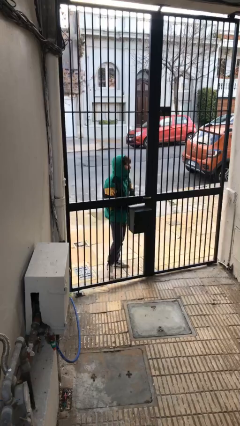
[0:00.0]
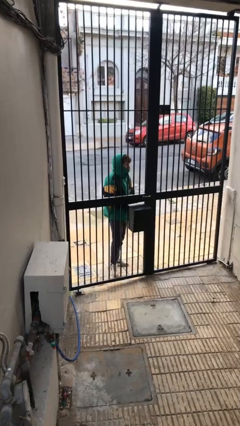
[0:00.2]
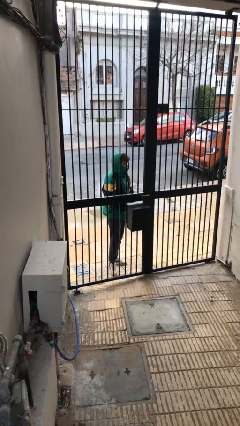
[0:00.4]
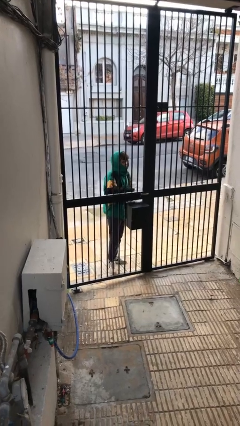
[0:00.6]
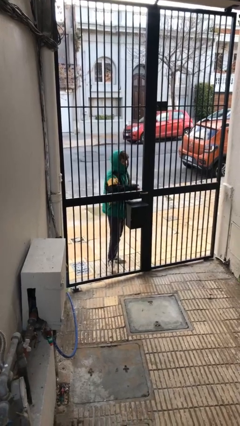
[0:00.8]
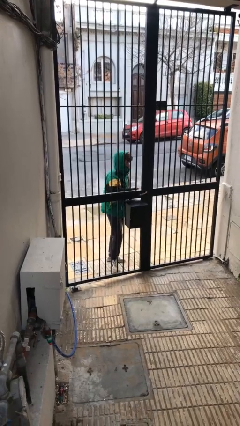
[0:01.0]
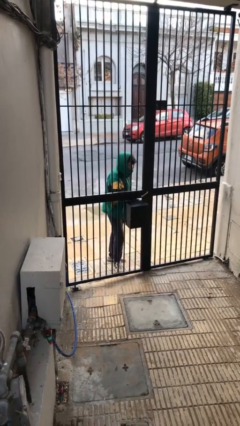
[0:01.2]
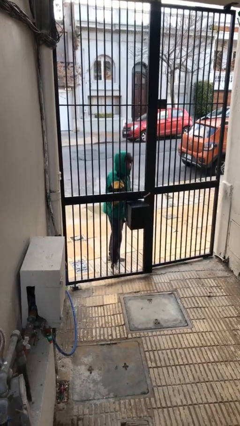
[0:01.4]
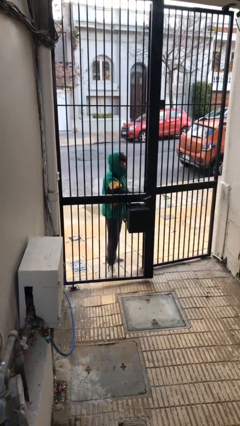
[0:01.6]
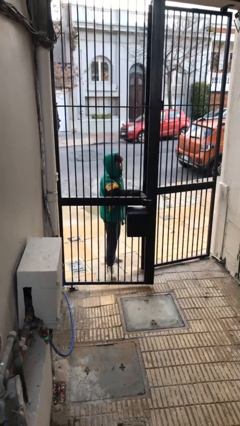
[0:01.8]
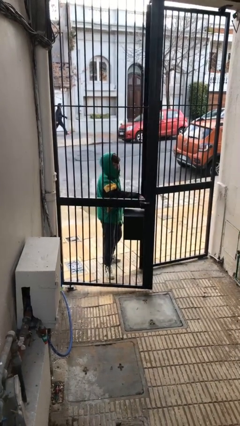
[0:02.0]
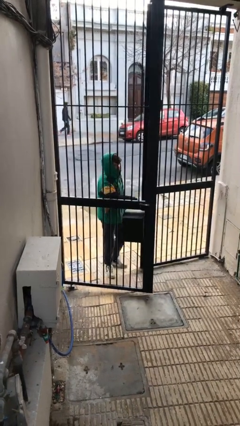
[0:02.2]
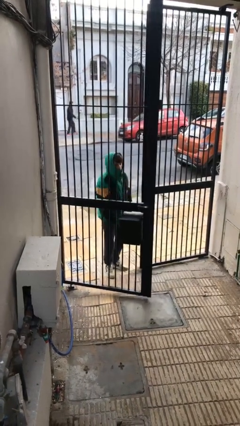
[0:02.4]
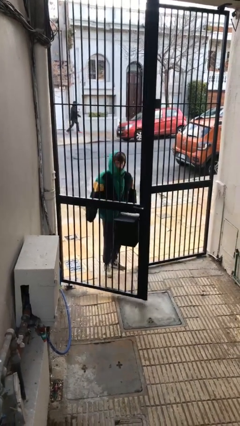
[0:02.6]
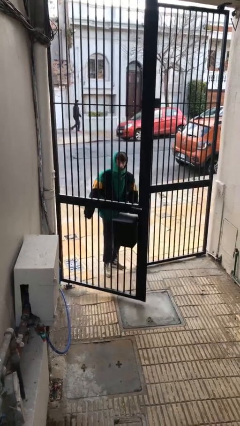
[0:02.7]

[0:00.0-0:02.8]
person opens gate

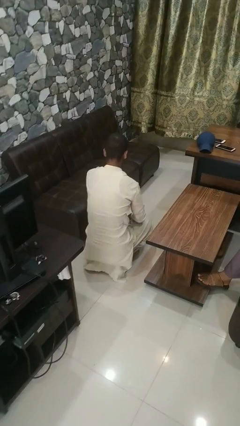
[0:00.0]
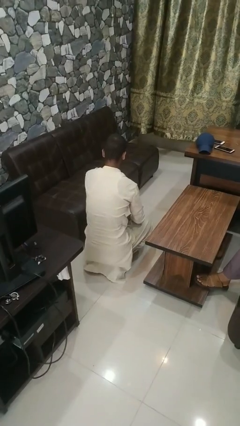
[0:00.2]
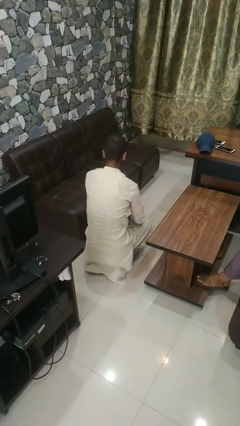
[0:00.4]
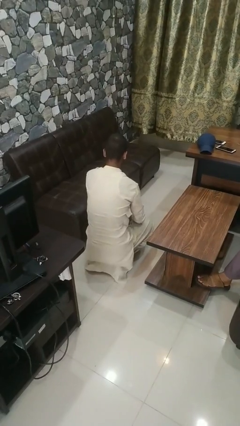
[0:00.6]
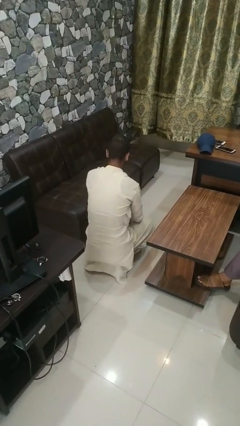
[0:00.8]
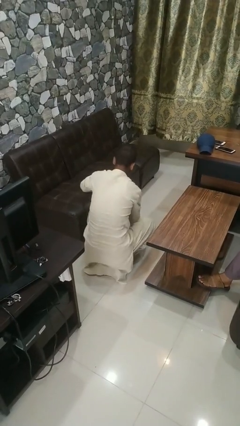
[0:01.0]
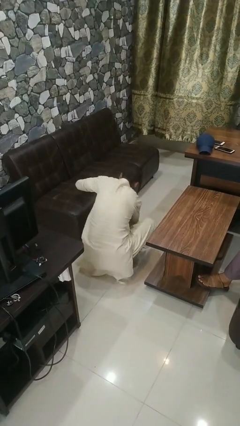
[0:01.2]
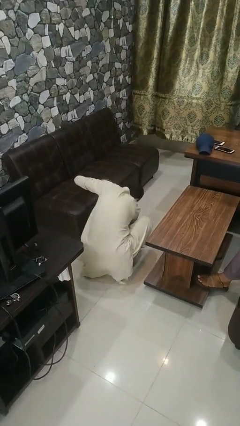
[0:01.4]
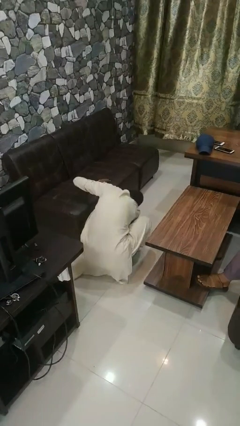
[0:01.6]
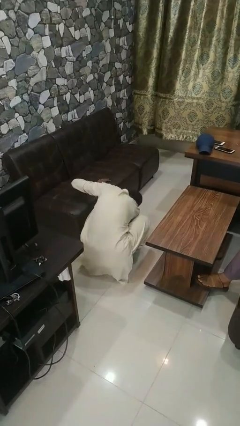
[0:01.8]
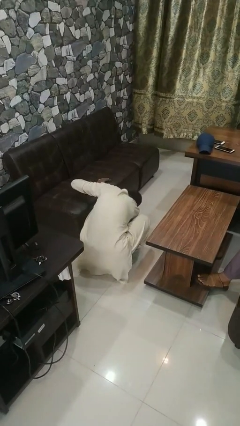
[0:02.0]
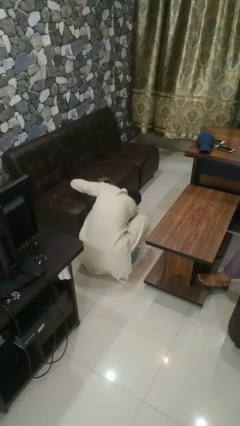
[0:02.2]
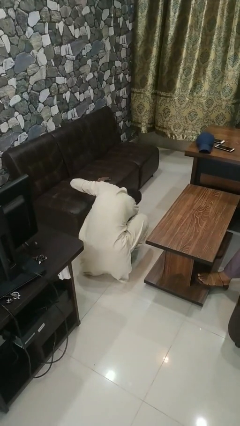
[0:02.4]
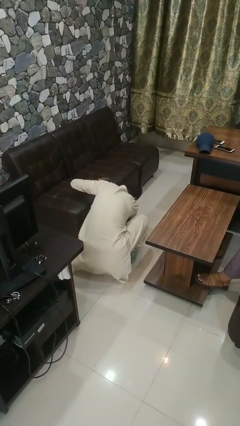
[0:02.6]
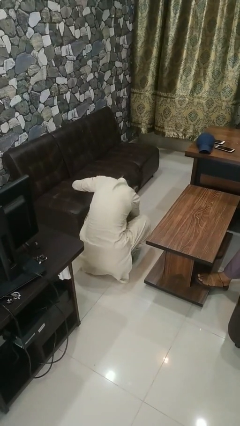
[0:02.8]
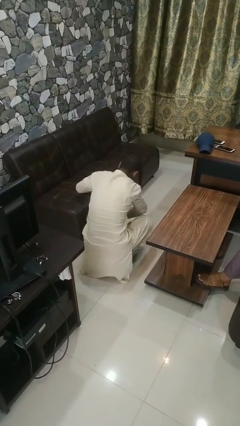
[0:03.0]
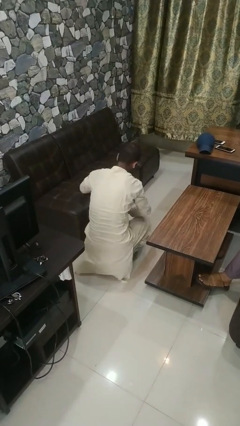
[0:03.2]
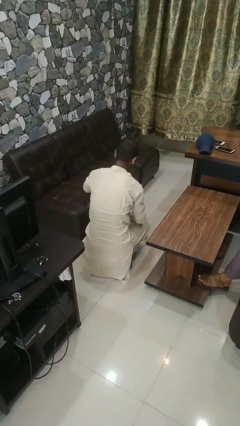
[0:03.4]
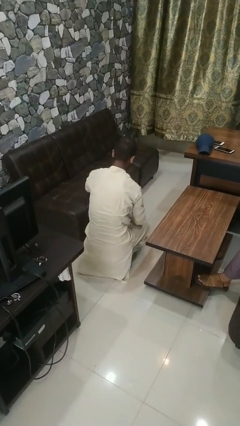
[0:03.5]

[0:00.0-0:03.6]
person searches under couch

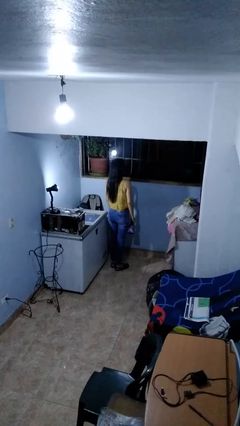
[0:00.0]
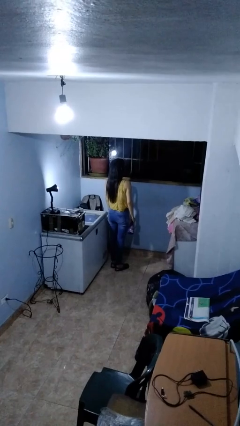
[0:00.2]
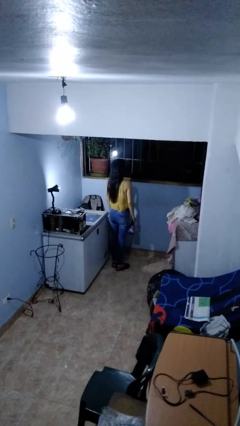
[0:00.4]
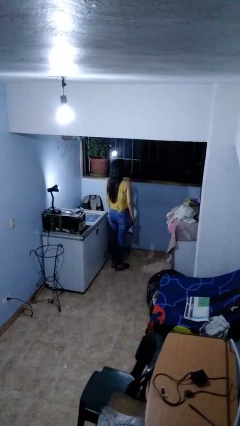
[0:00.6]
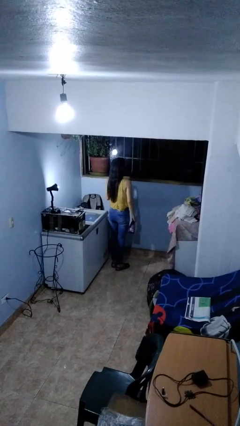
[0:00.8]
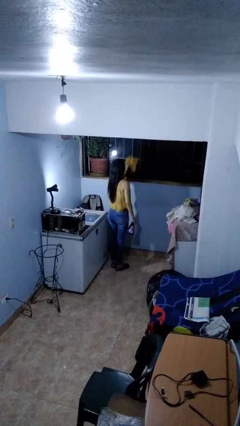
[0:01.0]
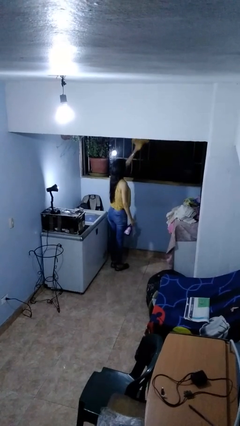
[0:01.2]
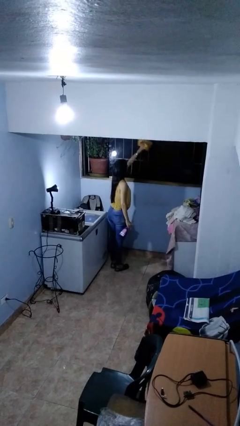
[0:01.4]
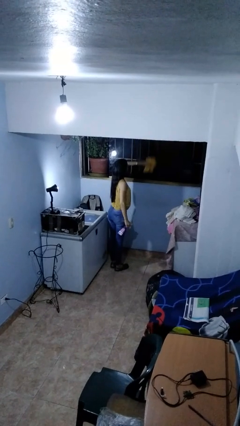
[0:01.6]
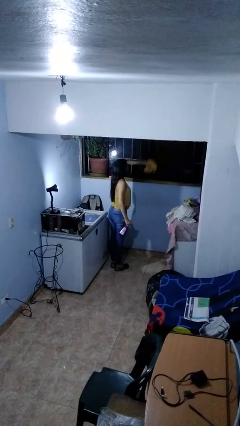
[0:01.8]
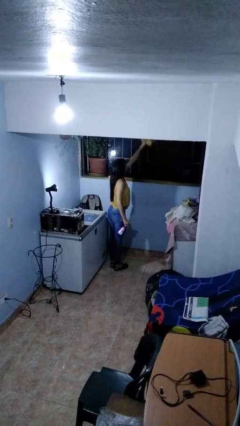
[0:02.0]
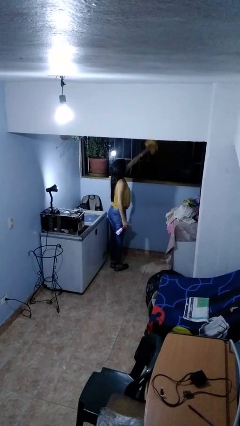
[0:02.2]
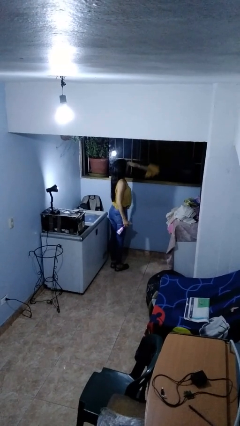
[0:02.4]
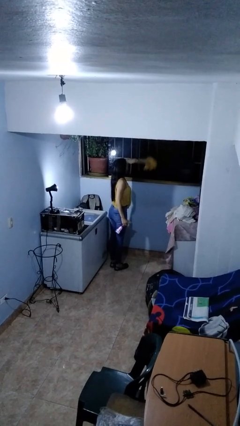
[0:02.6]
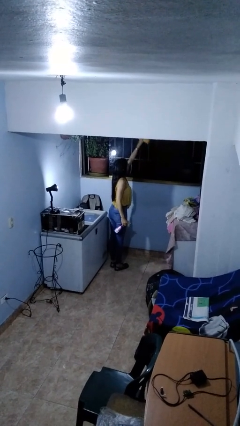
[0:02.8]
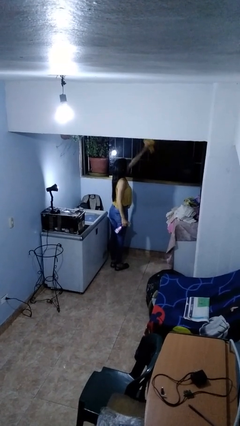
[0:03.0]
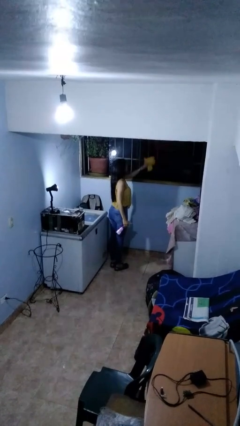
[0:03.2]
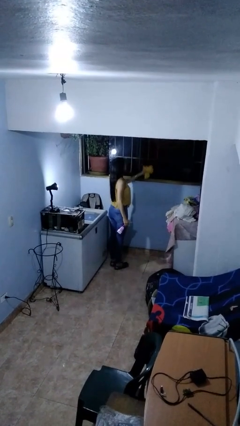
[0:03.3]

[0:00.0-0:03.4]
person washes window

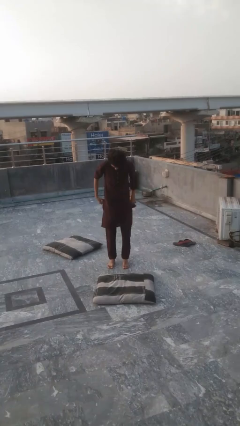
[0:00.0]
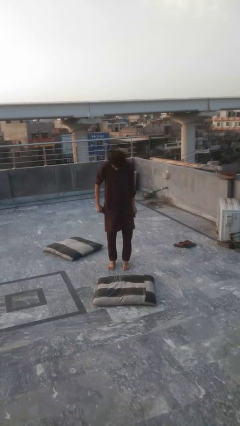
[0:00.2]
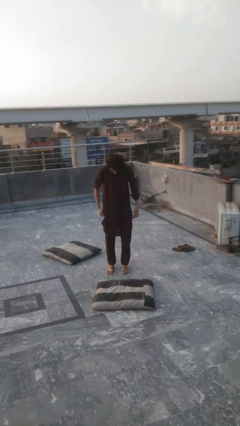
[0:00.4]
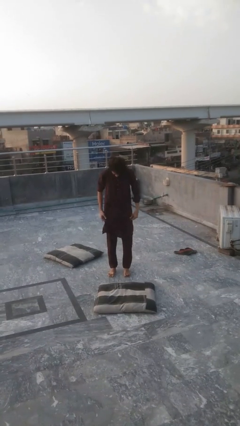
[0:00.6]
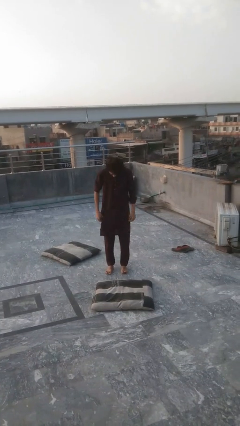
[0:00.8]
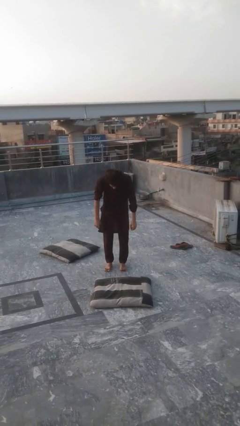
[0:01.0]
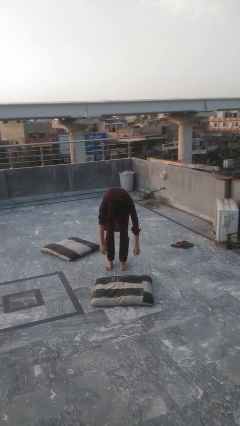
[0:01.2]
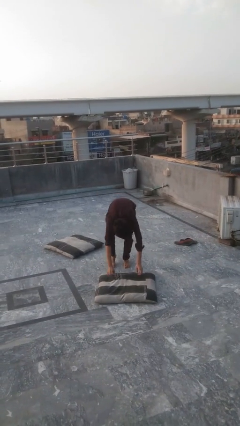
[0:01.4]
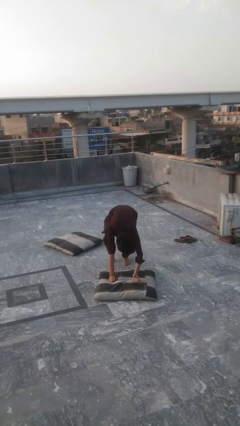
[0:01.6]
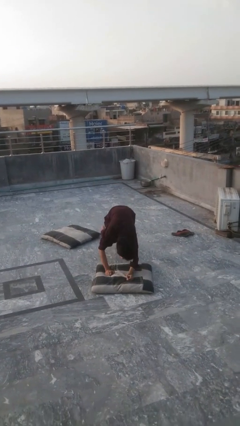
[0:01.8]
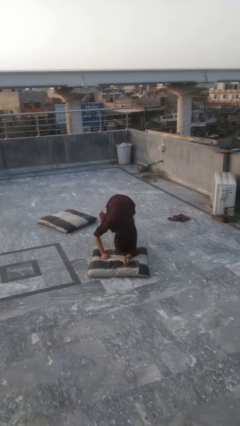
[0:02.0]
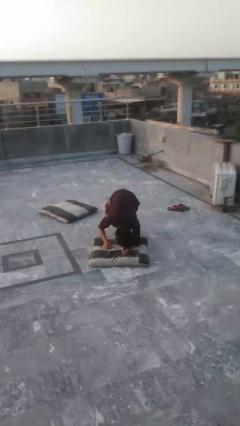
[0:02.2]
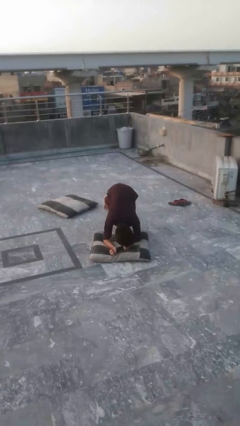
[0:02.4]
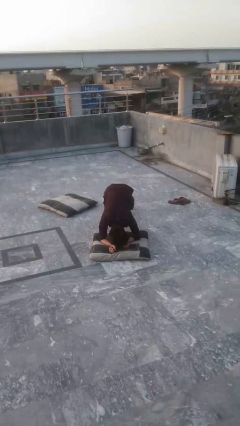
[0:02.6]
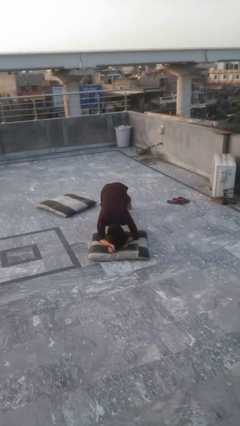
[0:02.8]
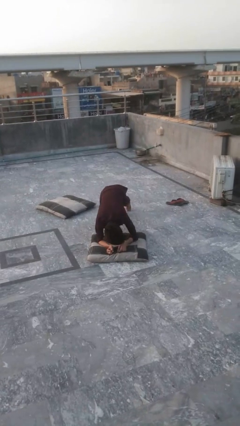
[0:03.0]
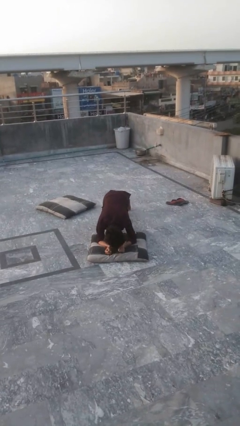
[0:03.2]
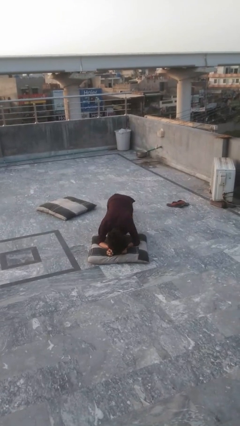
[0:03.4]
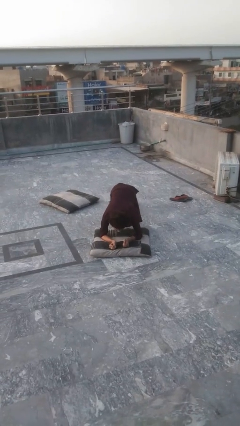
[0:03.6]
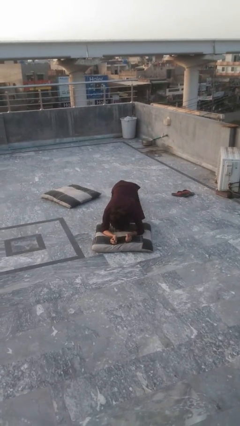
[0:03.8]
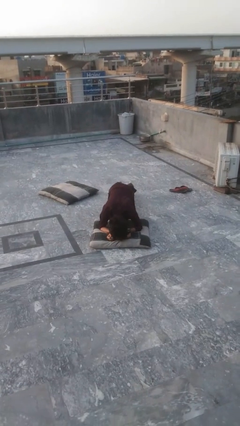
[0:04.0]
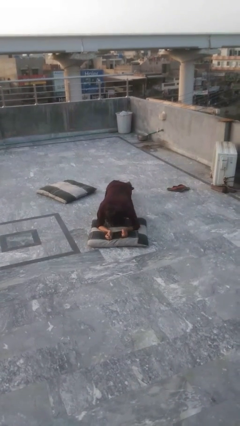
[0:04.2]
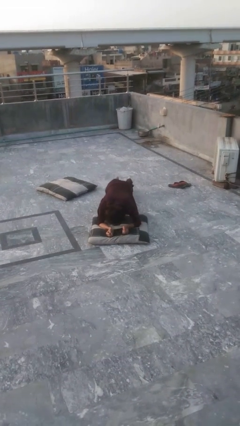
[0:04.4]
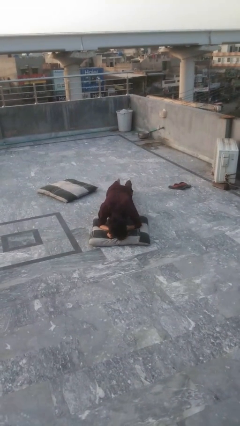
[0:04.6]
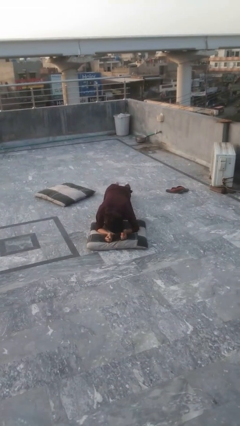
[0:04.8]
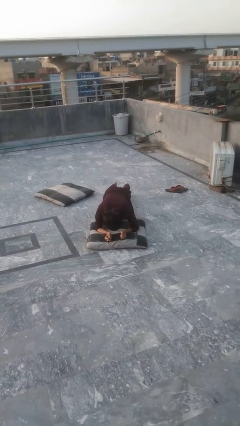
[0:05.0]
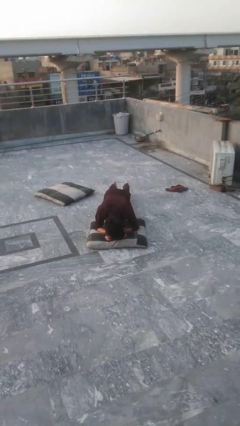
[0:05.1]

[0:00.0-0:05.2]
person exercises with plank

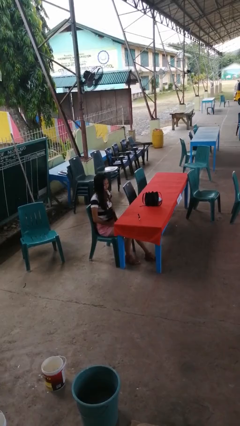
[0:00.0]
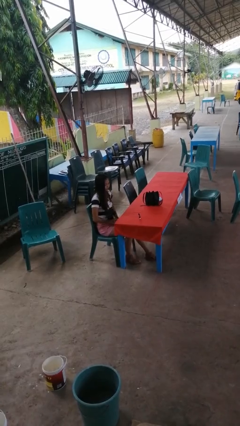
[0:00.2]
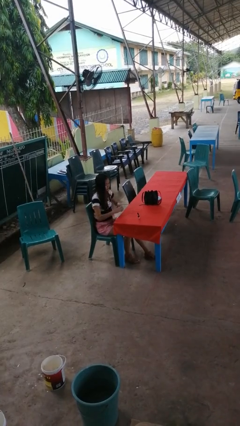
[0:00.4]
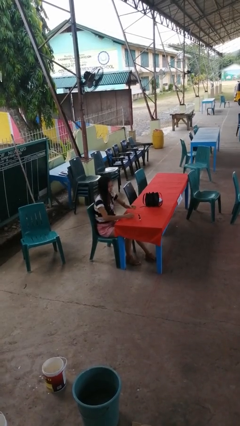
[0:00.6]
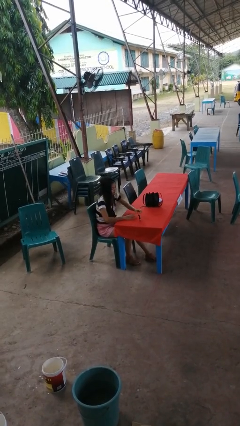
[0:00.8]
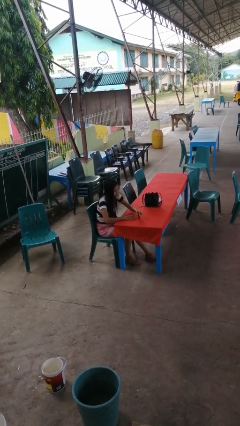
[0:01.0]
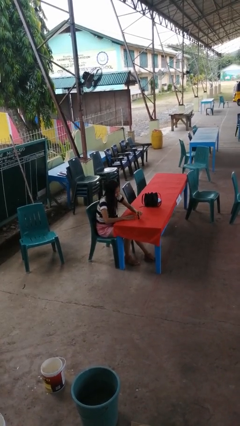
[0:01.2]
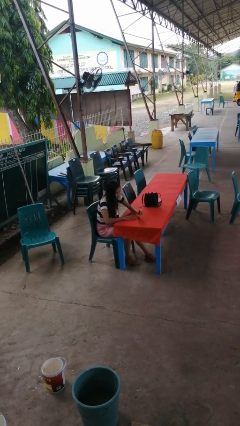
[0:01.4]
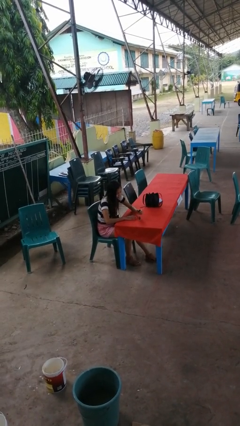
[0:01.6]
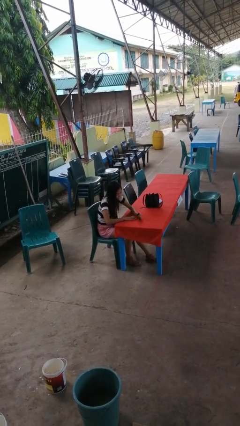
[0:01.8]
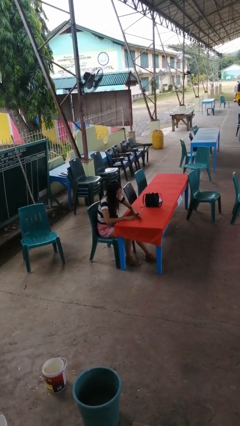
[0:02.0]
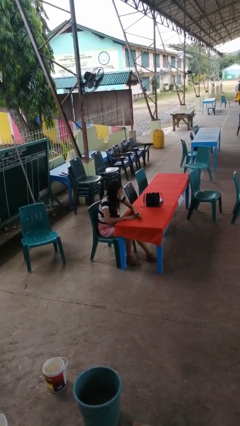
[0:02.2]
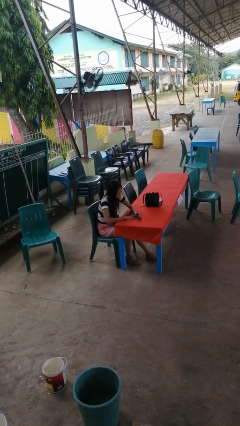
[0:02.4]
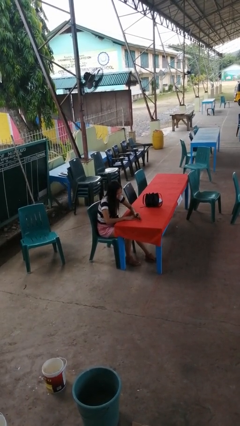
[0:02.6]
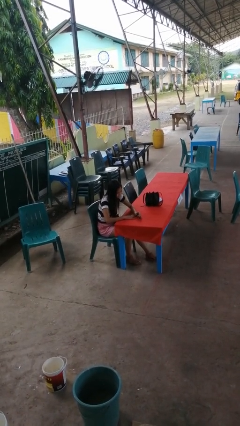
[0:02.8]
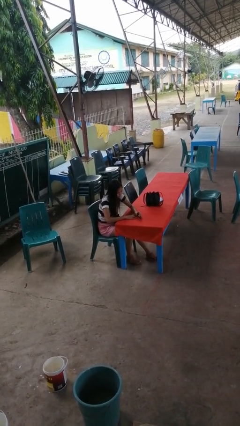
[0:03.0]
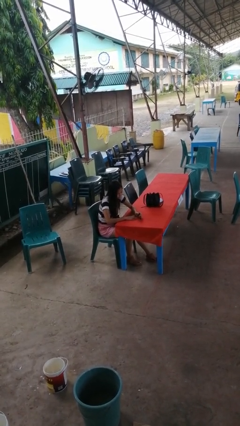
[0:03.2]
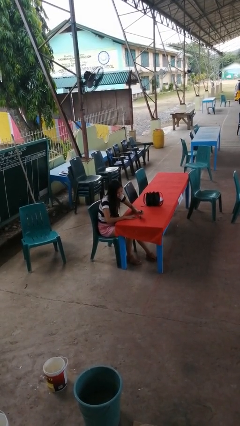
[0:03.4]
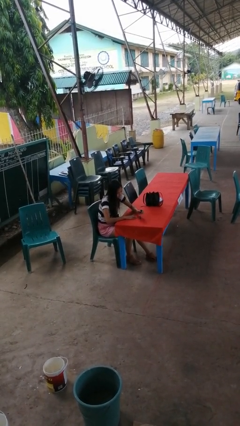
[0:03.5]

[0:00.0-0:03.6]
person paints fingernails
